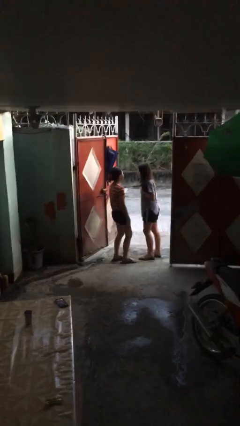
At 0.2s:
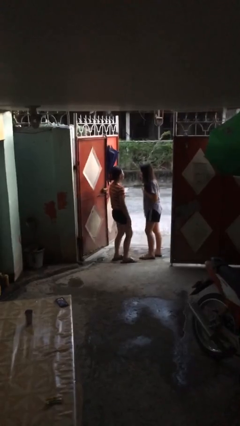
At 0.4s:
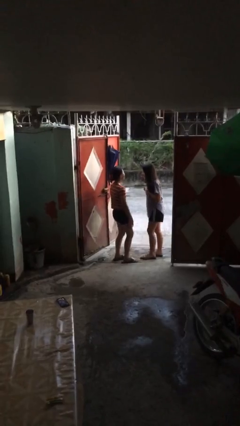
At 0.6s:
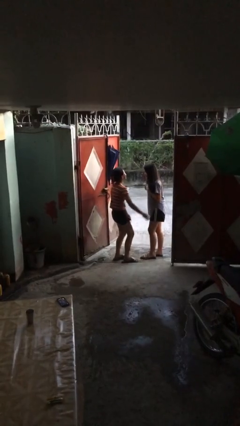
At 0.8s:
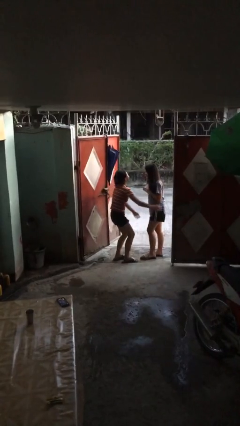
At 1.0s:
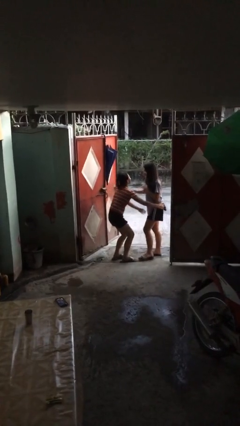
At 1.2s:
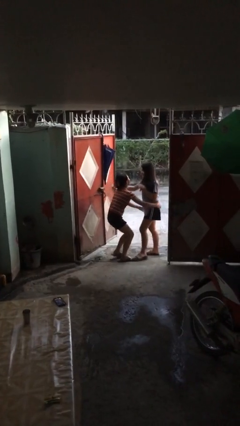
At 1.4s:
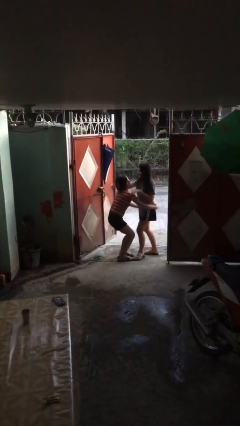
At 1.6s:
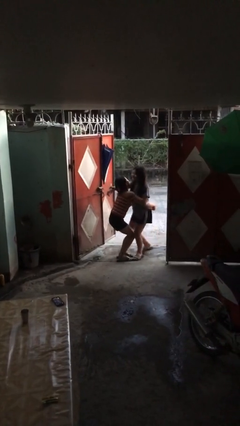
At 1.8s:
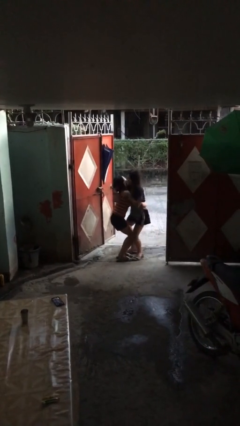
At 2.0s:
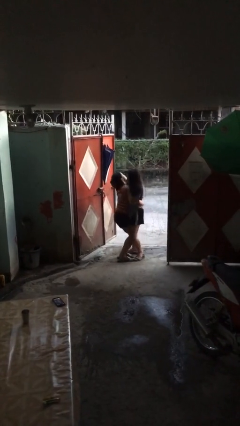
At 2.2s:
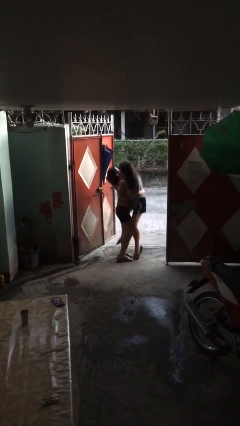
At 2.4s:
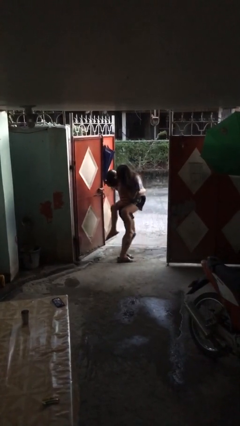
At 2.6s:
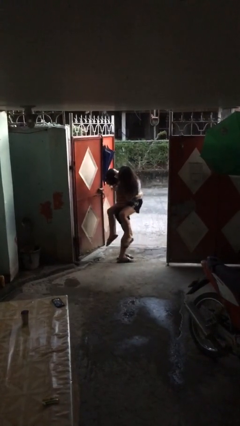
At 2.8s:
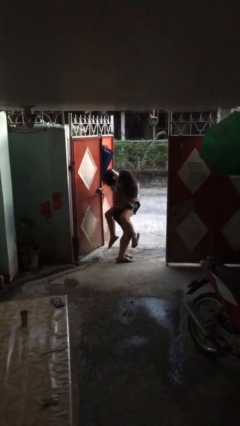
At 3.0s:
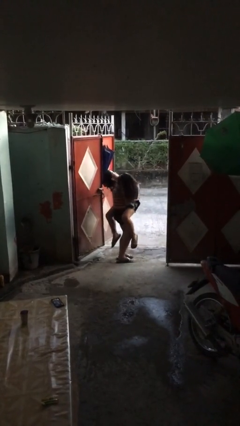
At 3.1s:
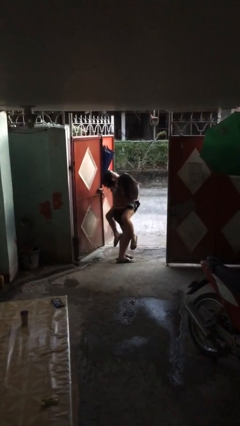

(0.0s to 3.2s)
person picks up person

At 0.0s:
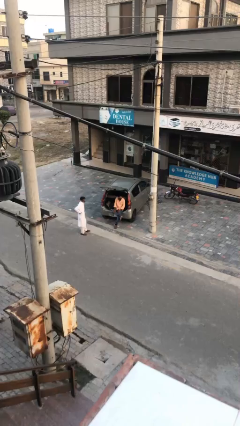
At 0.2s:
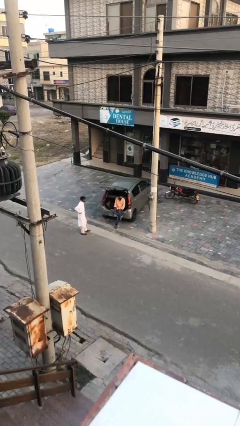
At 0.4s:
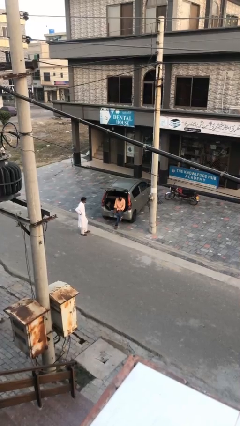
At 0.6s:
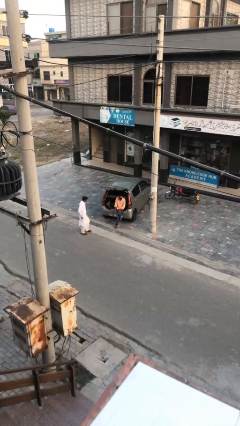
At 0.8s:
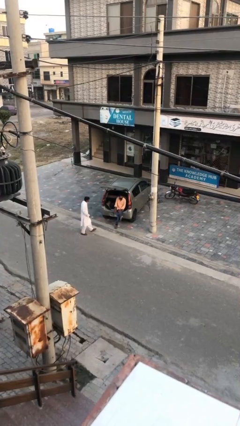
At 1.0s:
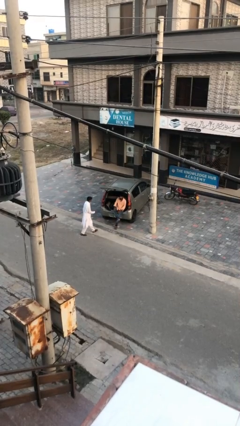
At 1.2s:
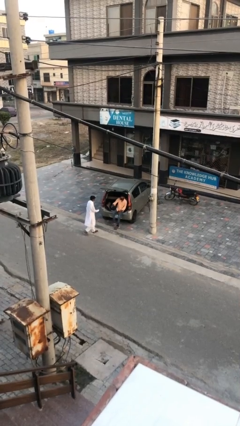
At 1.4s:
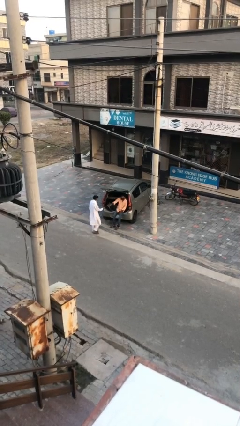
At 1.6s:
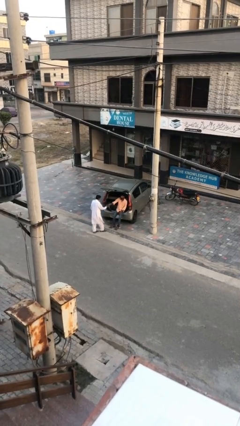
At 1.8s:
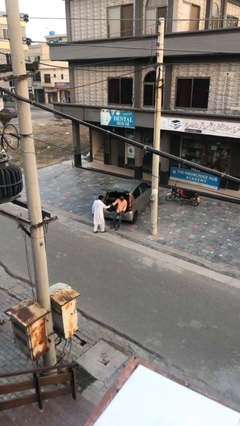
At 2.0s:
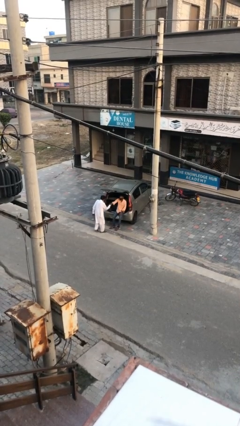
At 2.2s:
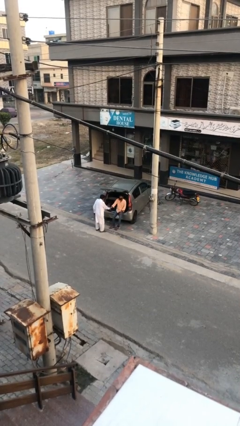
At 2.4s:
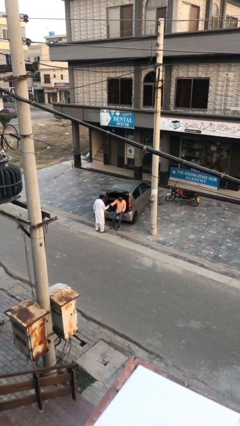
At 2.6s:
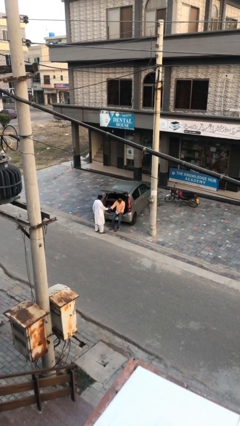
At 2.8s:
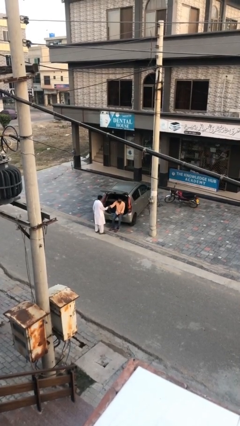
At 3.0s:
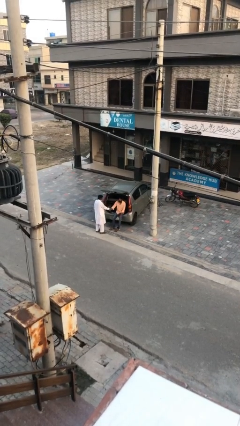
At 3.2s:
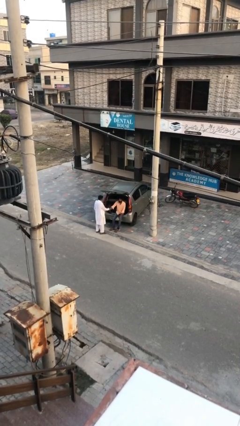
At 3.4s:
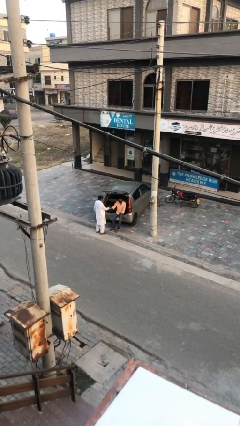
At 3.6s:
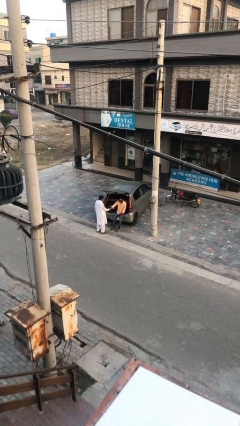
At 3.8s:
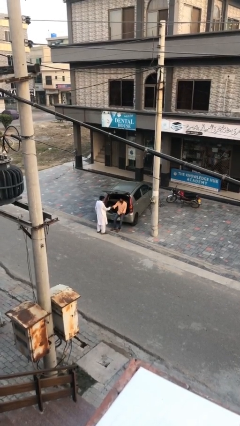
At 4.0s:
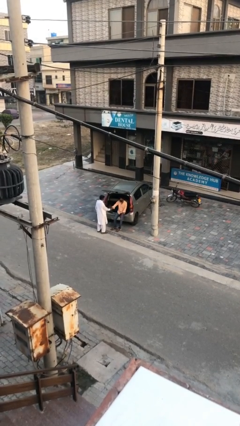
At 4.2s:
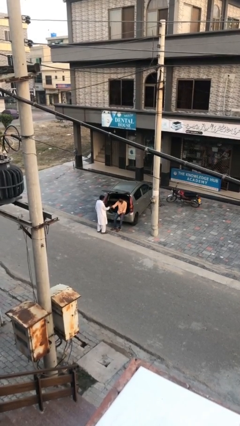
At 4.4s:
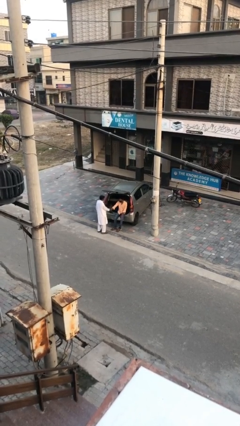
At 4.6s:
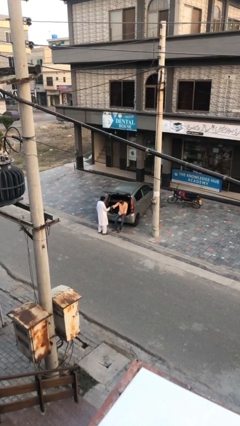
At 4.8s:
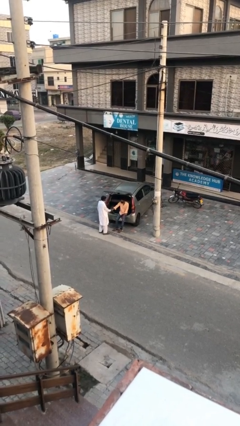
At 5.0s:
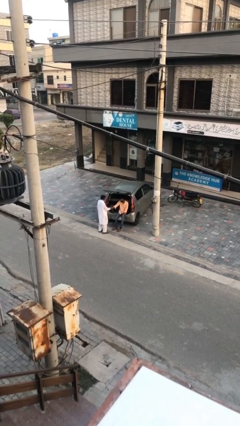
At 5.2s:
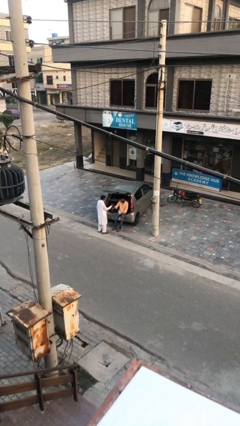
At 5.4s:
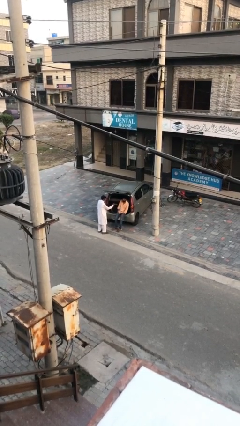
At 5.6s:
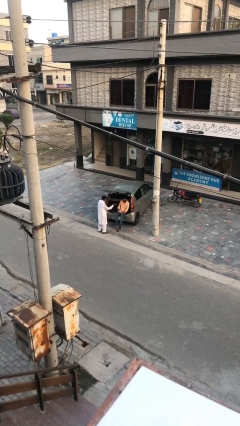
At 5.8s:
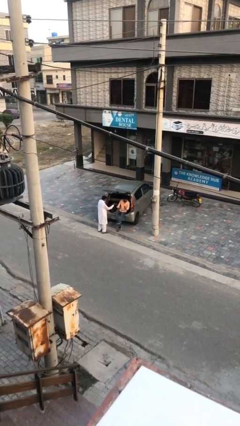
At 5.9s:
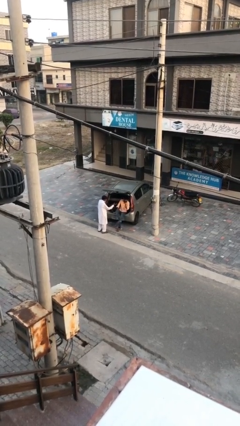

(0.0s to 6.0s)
person shakes hand

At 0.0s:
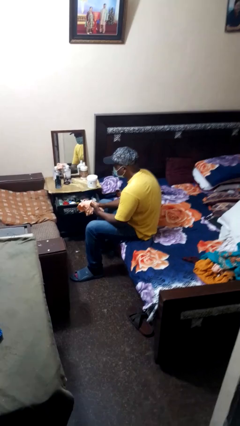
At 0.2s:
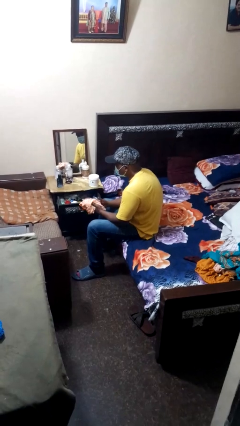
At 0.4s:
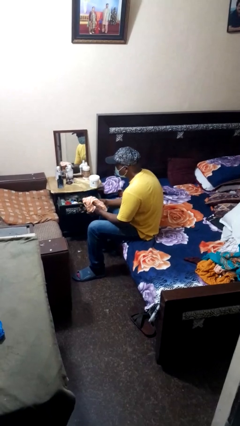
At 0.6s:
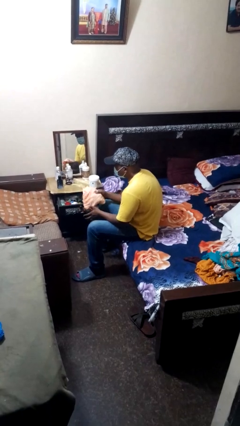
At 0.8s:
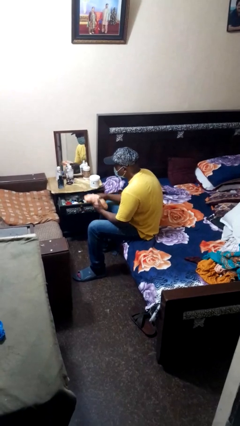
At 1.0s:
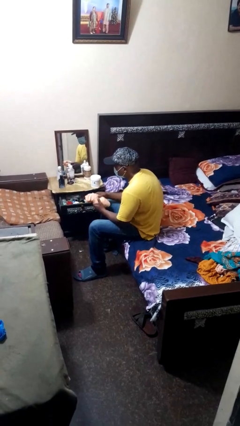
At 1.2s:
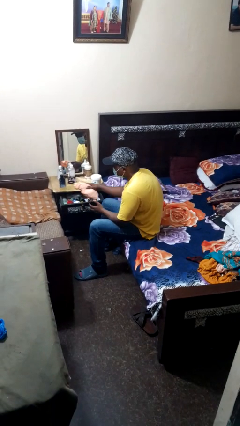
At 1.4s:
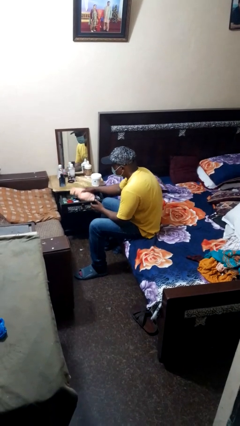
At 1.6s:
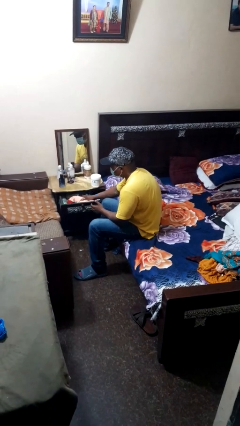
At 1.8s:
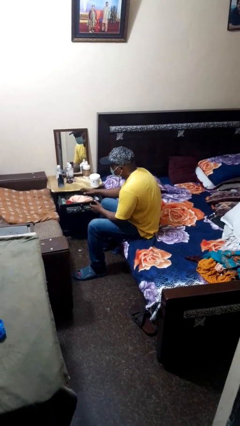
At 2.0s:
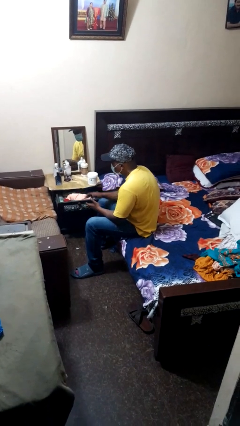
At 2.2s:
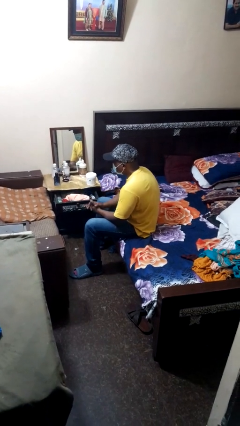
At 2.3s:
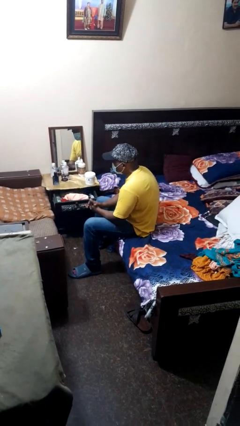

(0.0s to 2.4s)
person puts clothes into dresser

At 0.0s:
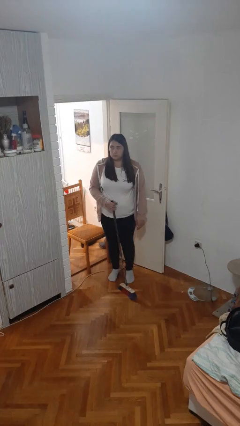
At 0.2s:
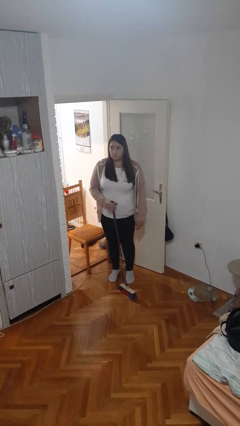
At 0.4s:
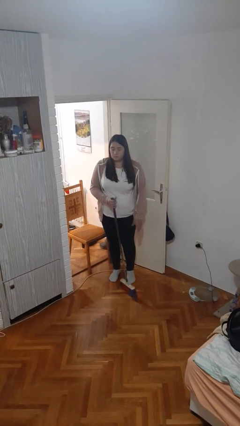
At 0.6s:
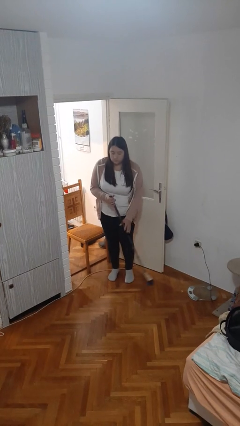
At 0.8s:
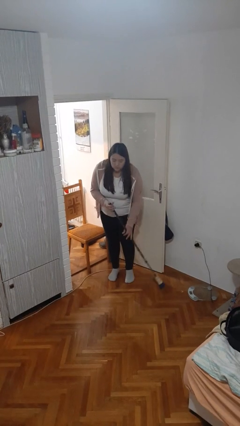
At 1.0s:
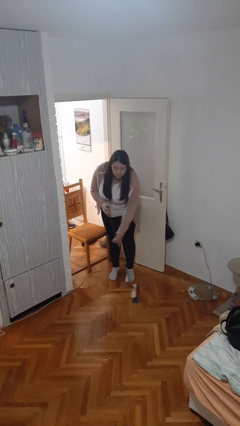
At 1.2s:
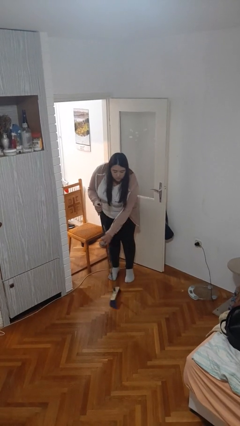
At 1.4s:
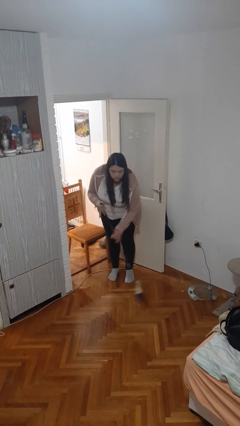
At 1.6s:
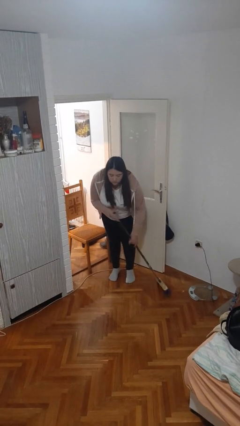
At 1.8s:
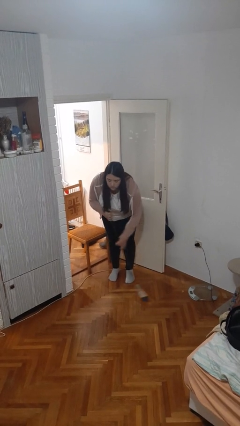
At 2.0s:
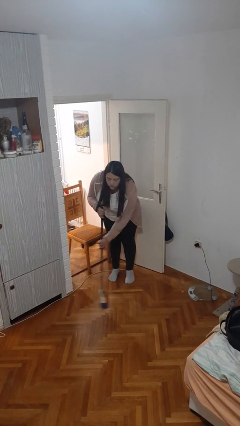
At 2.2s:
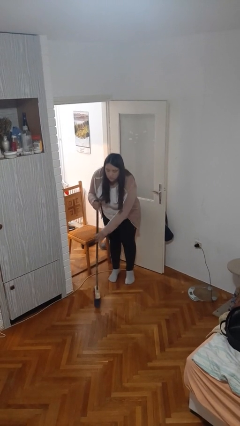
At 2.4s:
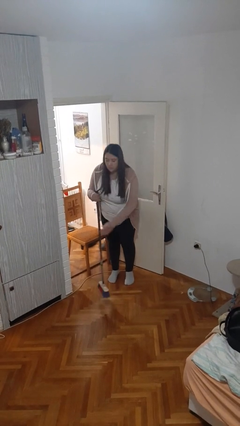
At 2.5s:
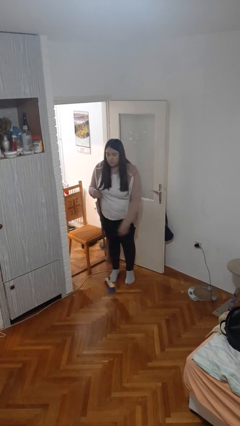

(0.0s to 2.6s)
person sweeps floor

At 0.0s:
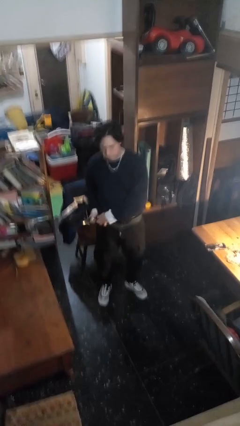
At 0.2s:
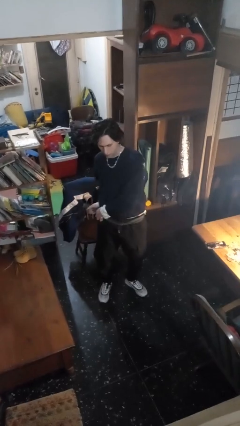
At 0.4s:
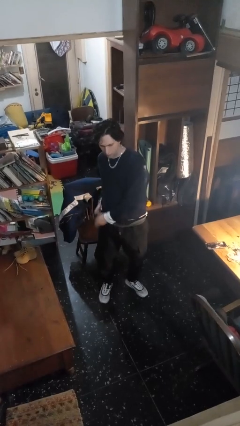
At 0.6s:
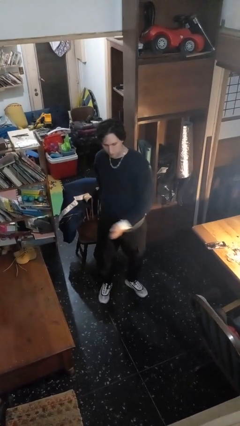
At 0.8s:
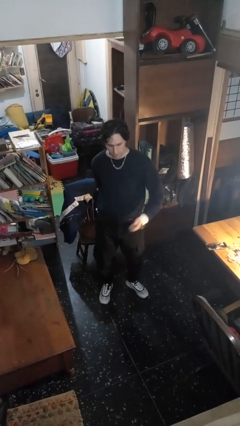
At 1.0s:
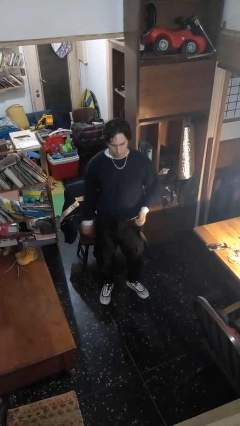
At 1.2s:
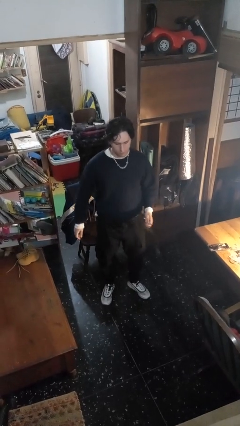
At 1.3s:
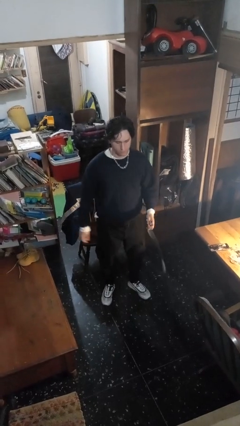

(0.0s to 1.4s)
person takes off belt

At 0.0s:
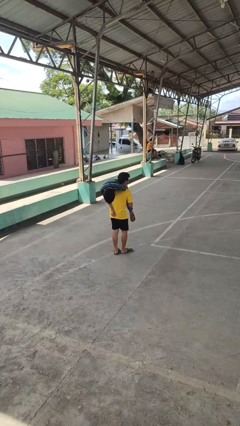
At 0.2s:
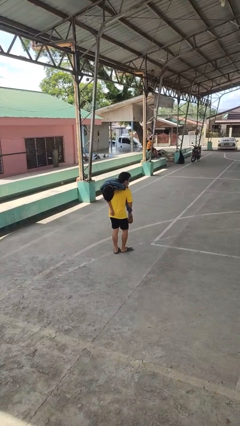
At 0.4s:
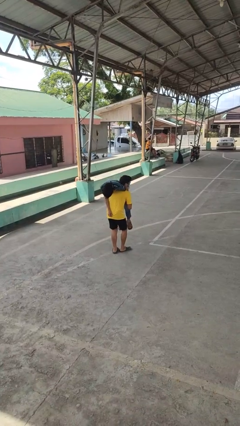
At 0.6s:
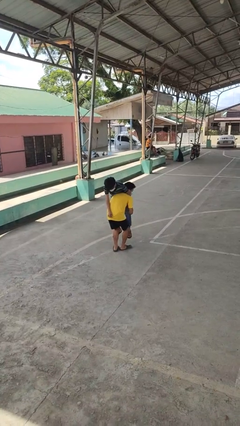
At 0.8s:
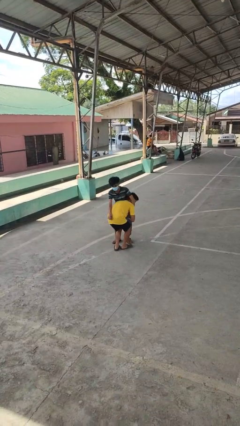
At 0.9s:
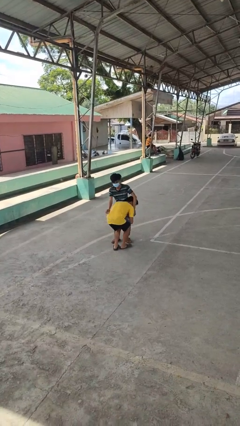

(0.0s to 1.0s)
person puts down person

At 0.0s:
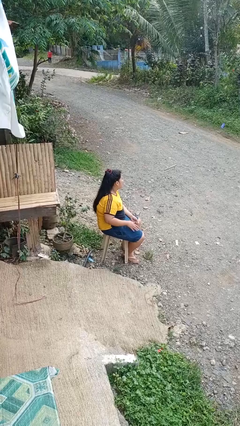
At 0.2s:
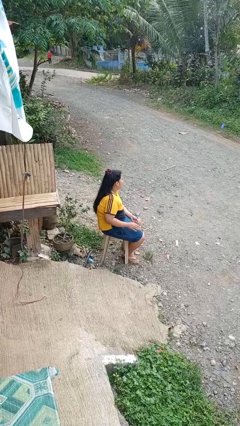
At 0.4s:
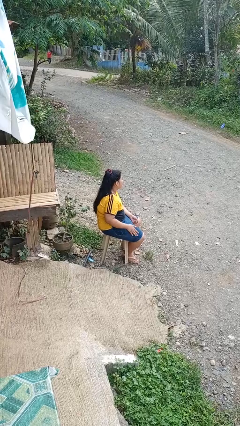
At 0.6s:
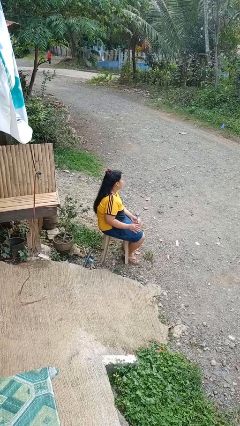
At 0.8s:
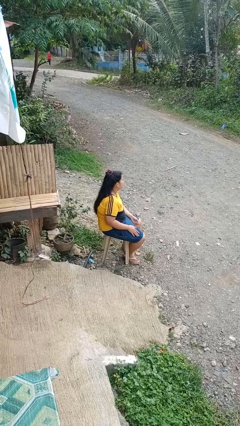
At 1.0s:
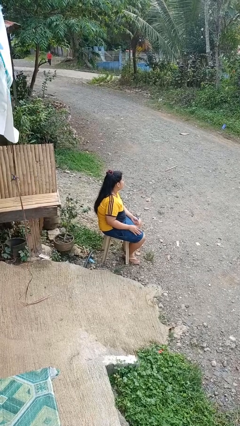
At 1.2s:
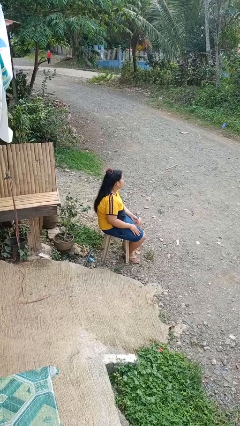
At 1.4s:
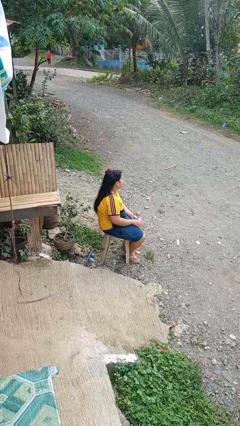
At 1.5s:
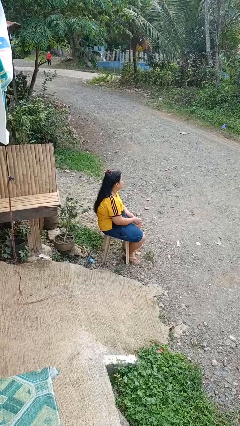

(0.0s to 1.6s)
person slaps hands on thighs
